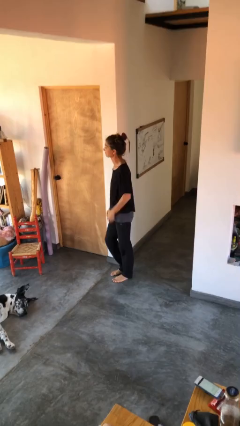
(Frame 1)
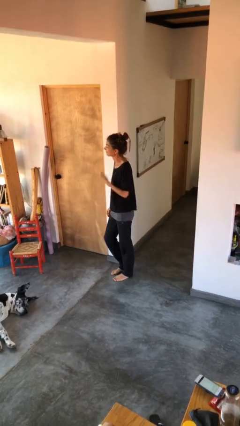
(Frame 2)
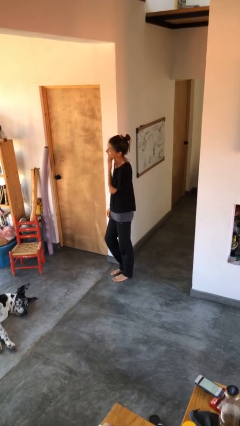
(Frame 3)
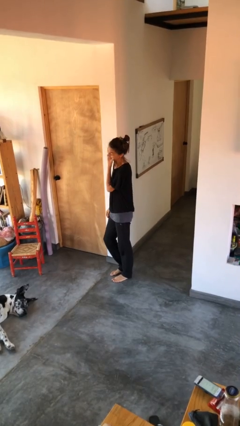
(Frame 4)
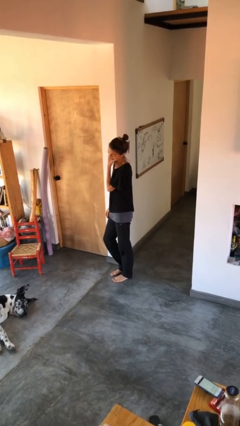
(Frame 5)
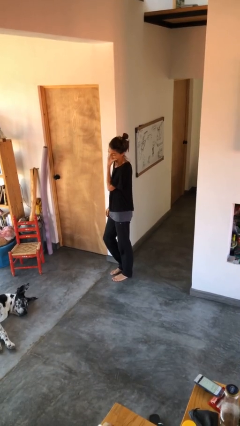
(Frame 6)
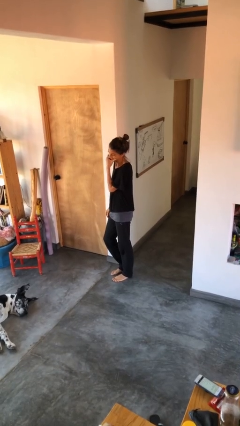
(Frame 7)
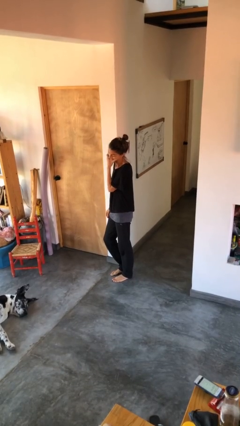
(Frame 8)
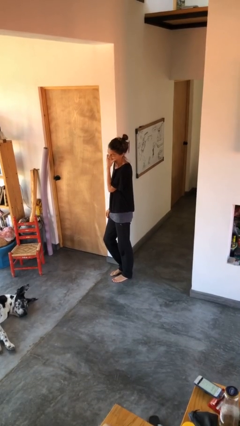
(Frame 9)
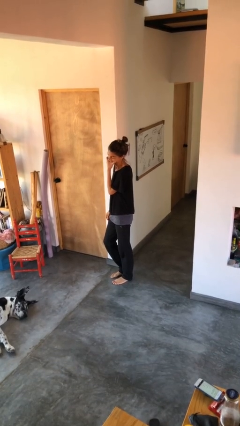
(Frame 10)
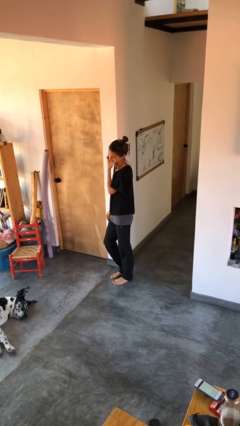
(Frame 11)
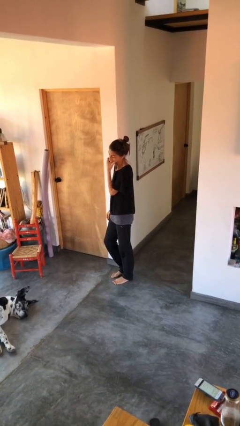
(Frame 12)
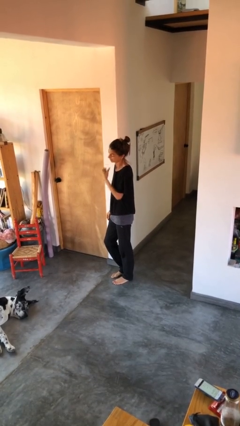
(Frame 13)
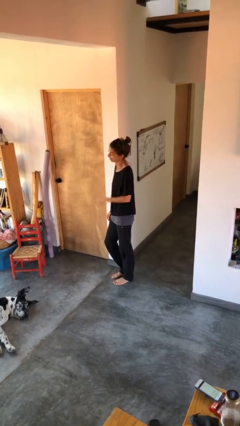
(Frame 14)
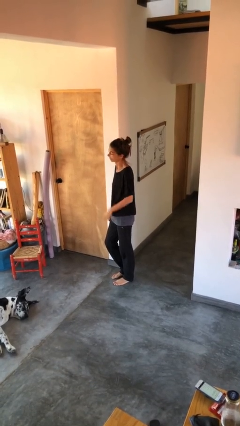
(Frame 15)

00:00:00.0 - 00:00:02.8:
person scratches face

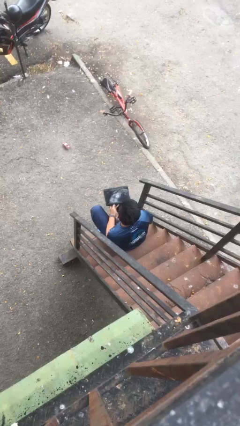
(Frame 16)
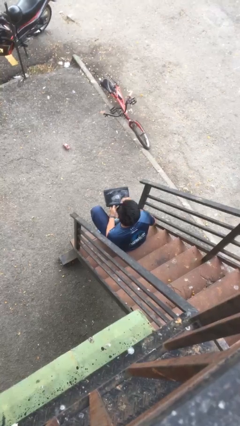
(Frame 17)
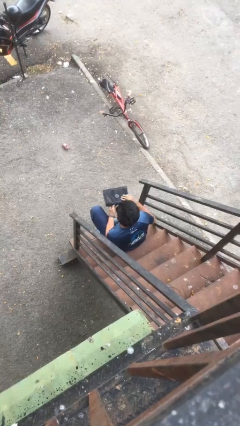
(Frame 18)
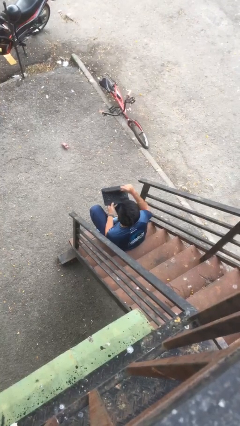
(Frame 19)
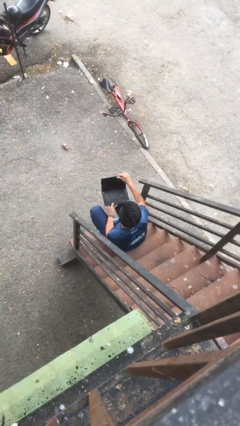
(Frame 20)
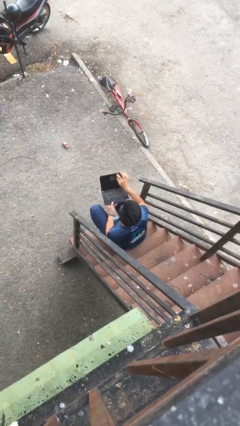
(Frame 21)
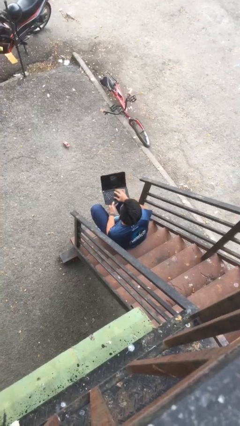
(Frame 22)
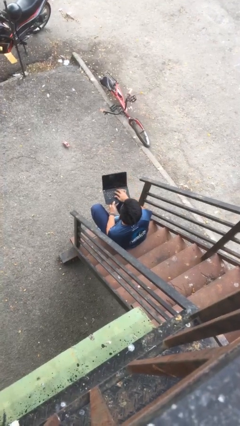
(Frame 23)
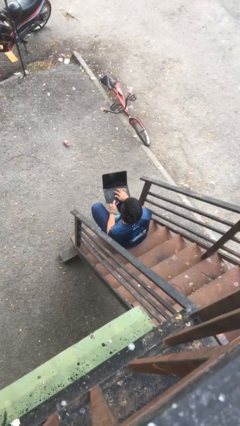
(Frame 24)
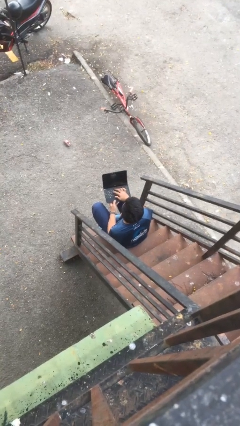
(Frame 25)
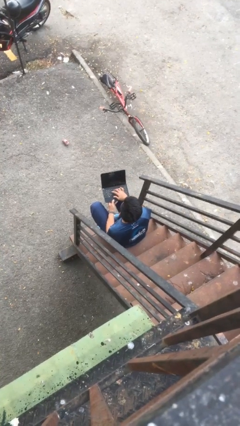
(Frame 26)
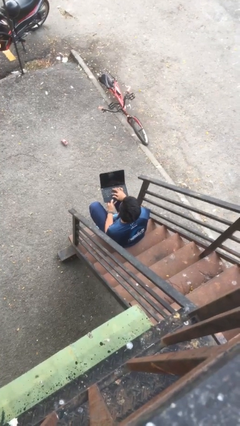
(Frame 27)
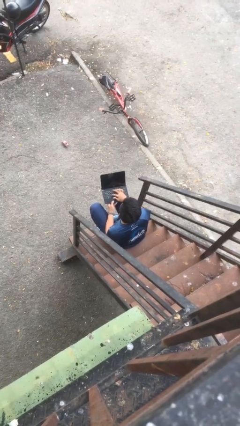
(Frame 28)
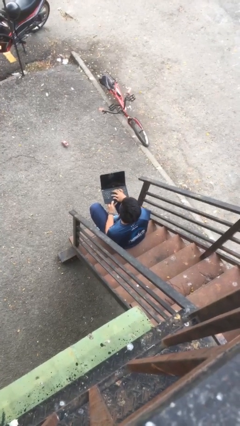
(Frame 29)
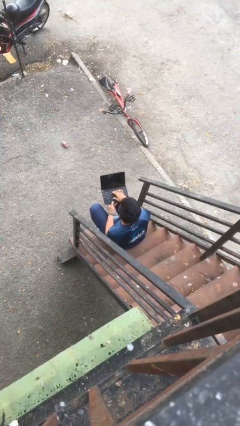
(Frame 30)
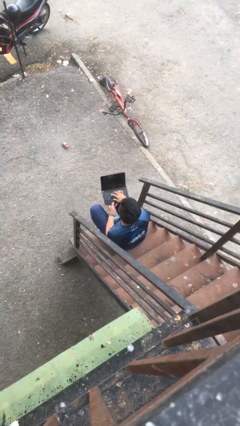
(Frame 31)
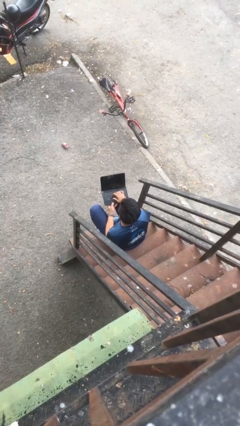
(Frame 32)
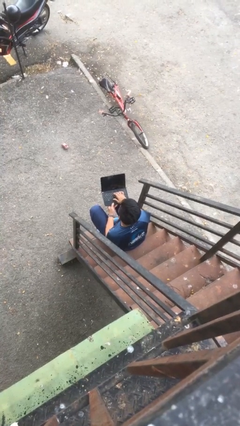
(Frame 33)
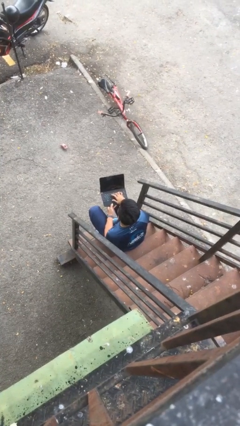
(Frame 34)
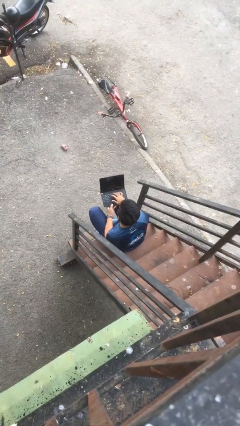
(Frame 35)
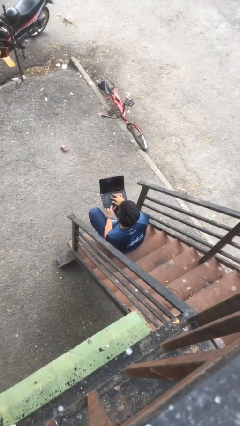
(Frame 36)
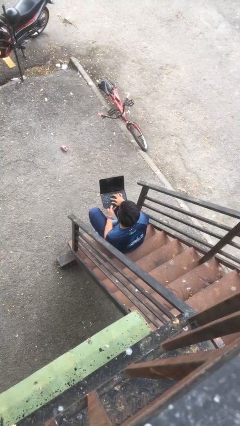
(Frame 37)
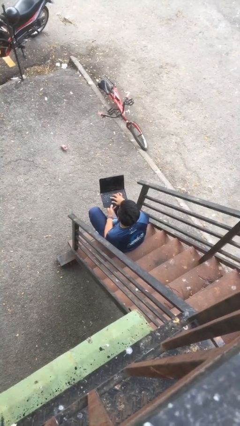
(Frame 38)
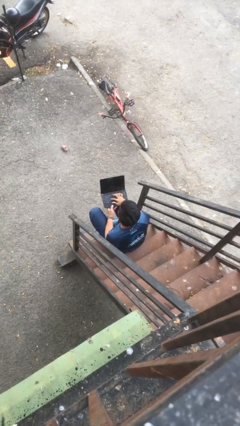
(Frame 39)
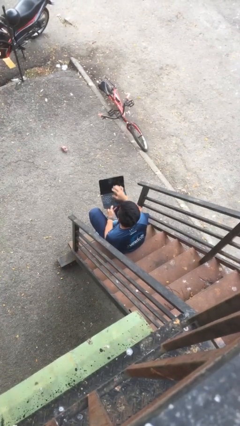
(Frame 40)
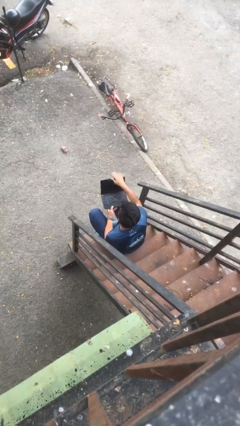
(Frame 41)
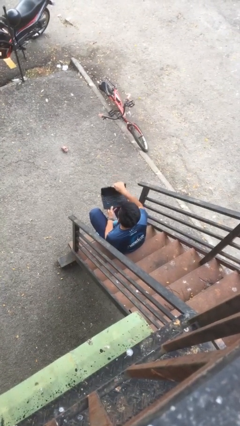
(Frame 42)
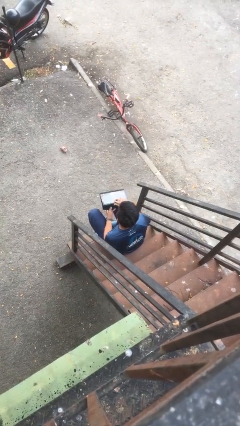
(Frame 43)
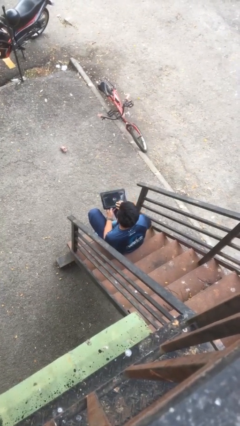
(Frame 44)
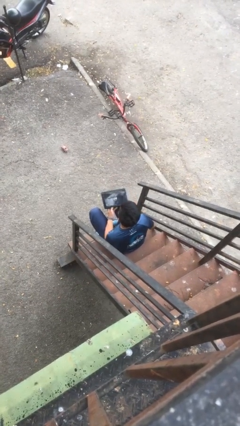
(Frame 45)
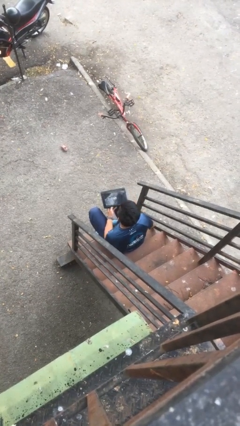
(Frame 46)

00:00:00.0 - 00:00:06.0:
person interacts with laptop

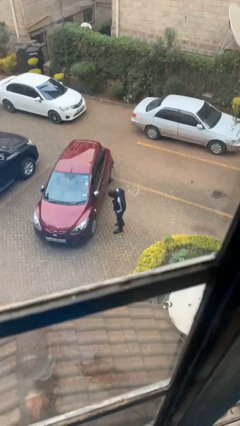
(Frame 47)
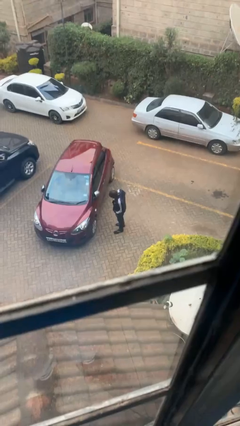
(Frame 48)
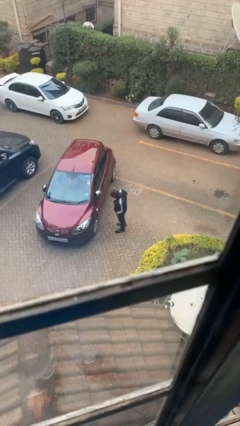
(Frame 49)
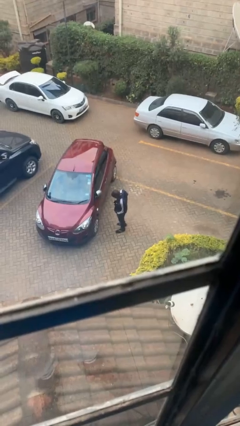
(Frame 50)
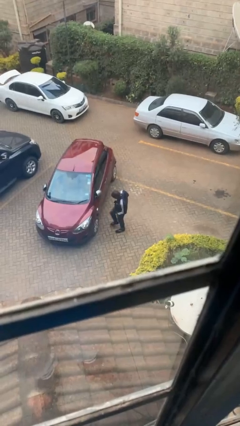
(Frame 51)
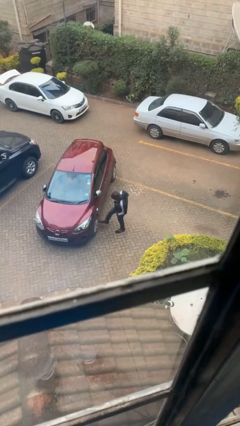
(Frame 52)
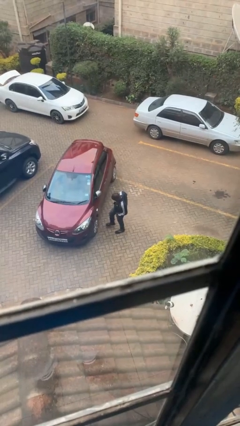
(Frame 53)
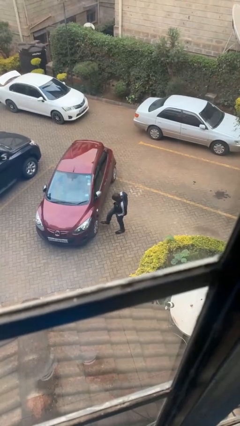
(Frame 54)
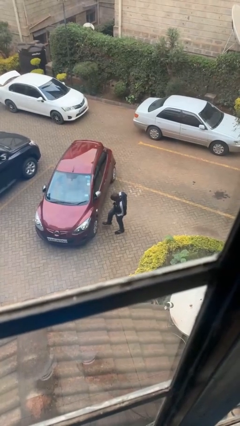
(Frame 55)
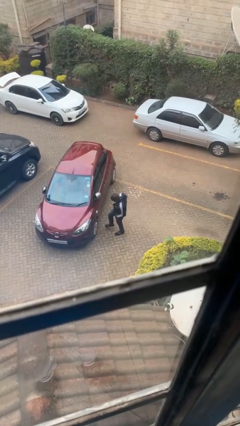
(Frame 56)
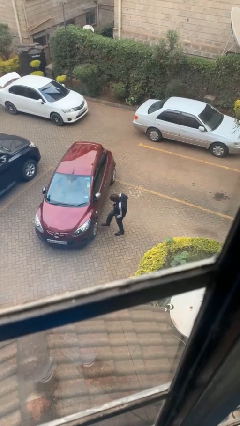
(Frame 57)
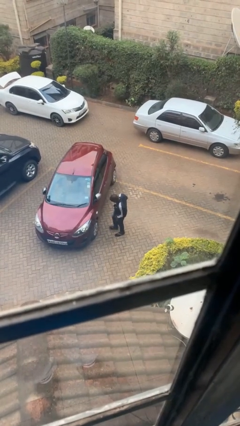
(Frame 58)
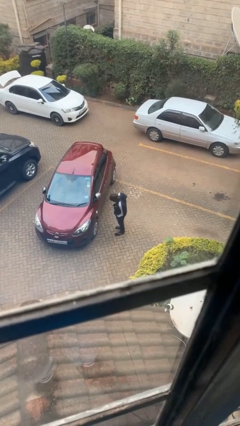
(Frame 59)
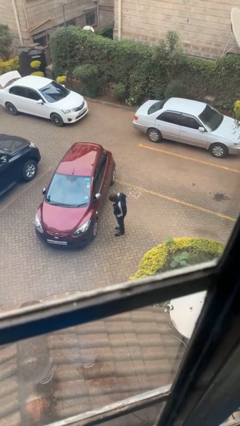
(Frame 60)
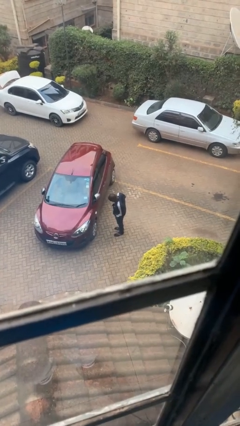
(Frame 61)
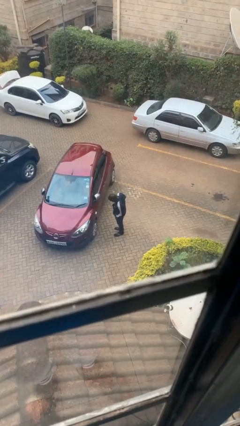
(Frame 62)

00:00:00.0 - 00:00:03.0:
person kicks car tires

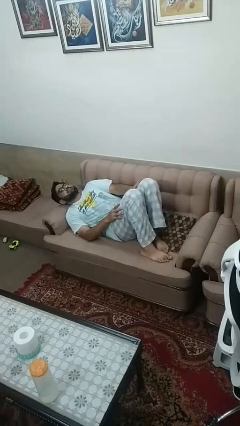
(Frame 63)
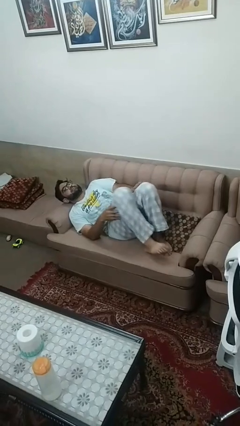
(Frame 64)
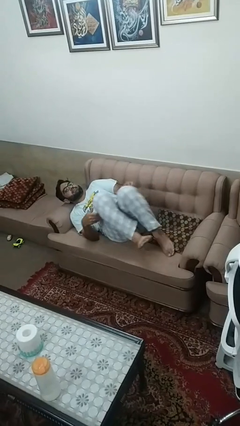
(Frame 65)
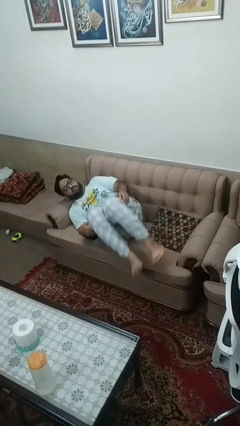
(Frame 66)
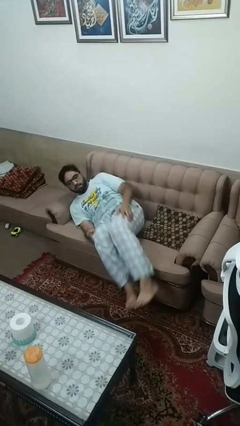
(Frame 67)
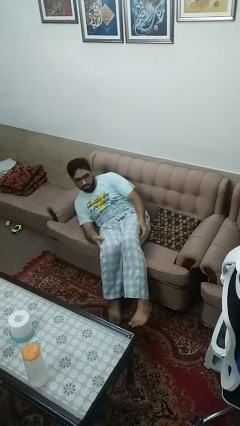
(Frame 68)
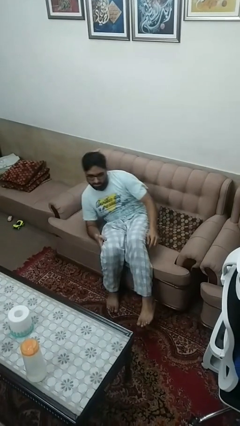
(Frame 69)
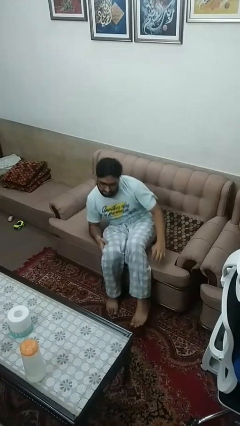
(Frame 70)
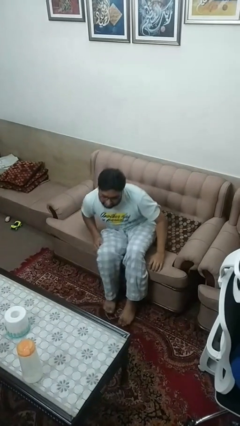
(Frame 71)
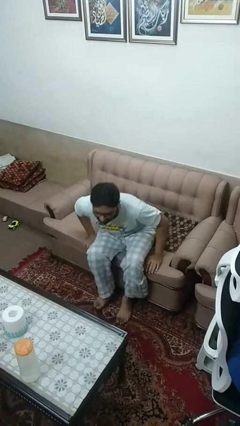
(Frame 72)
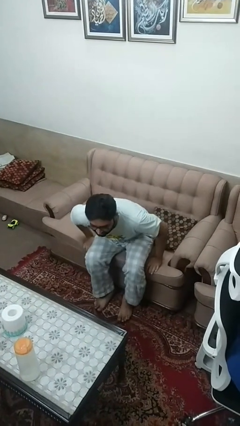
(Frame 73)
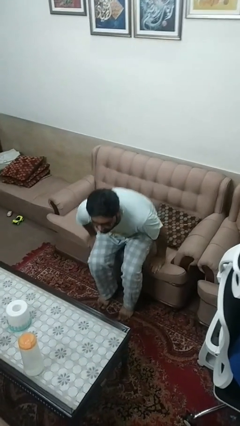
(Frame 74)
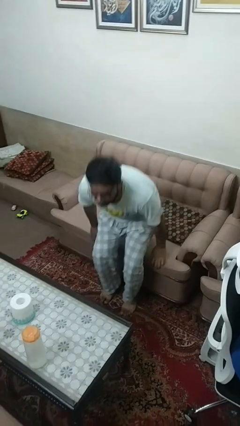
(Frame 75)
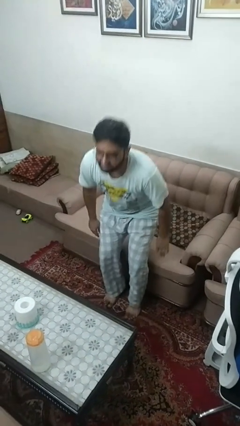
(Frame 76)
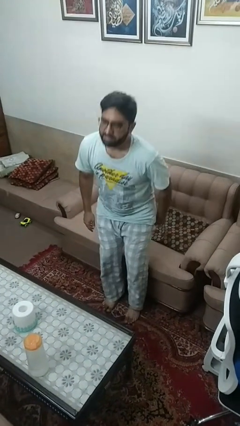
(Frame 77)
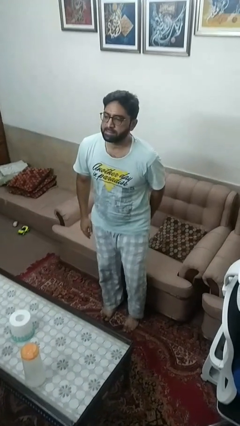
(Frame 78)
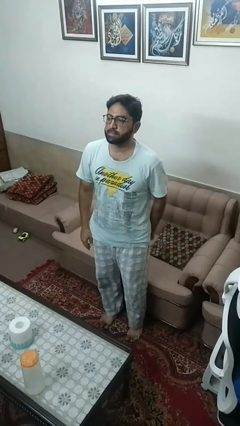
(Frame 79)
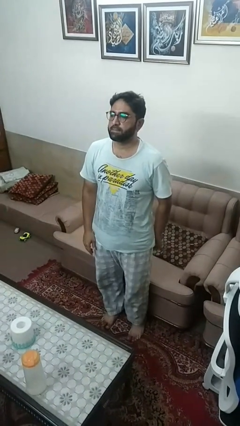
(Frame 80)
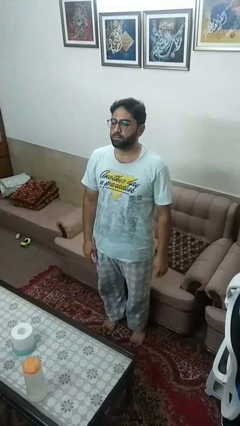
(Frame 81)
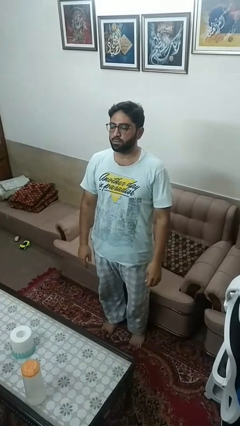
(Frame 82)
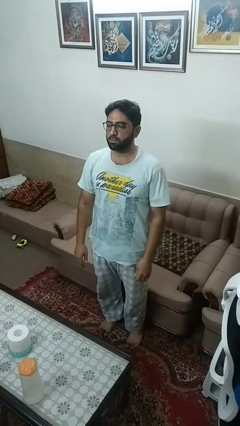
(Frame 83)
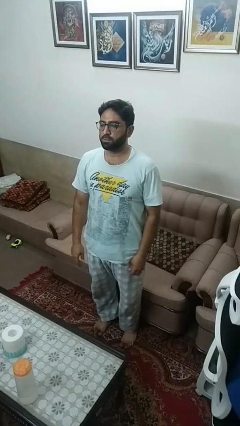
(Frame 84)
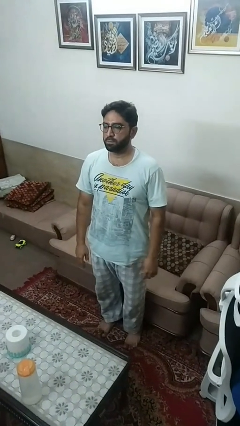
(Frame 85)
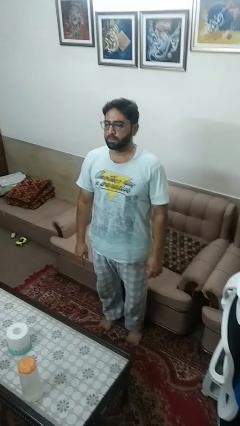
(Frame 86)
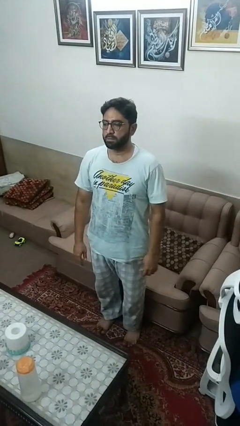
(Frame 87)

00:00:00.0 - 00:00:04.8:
person stands up
